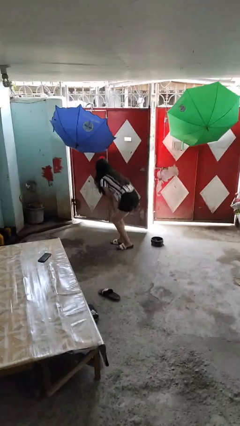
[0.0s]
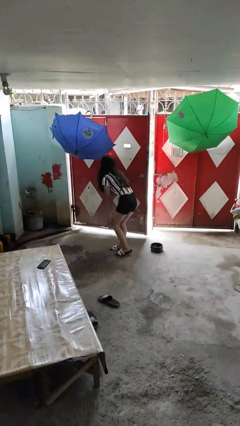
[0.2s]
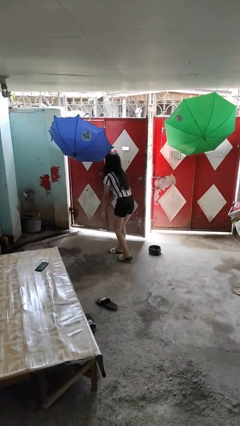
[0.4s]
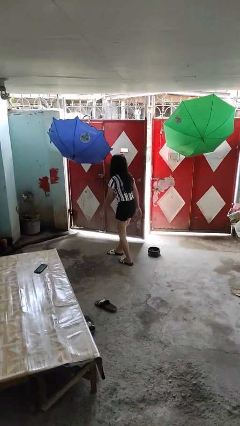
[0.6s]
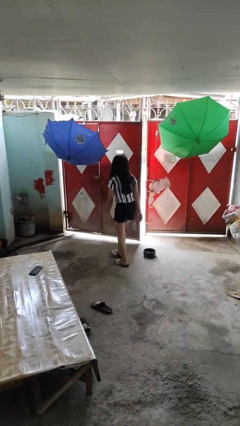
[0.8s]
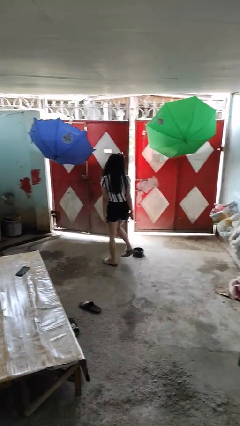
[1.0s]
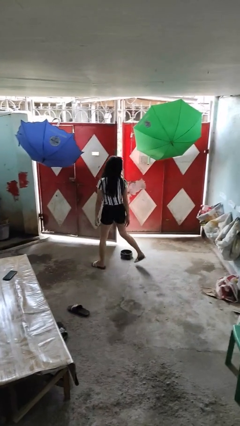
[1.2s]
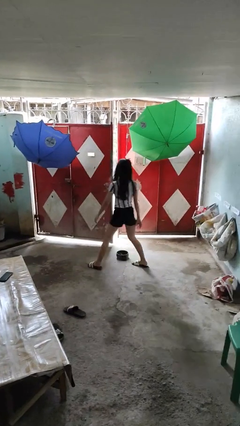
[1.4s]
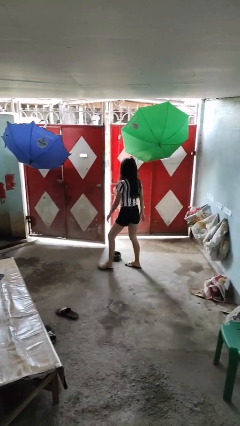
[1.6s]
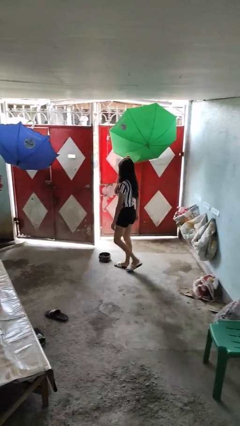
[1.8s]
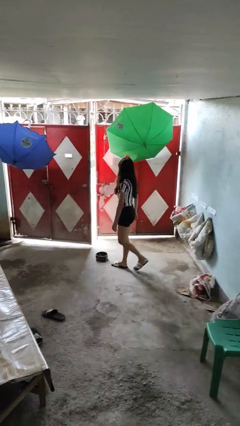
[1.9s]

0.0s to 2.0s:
person stands up from floor

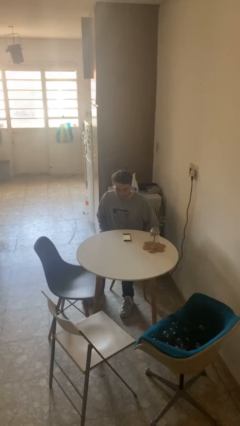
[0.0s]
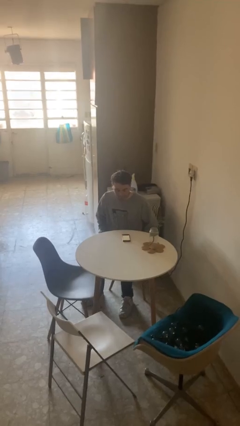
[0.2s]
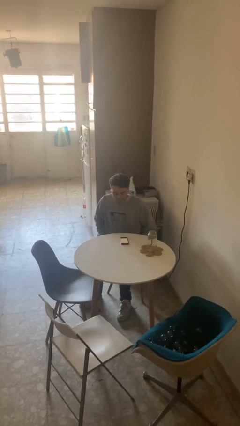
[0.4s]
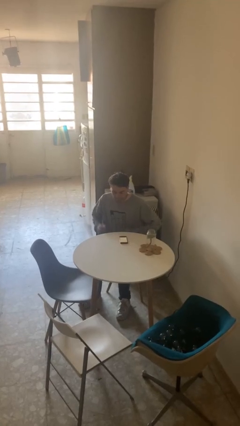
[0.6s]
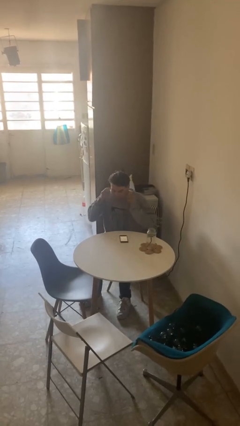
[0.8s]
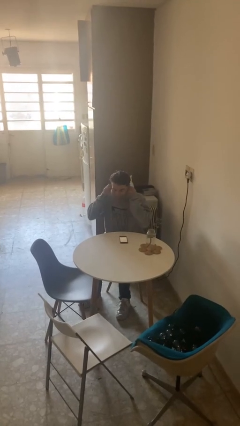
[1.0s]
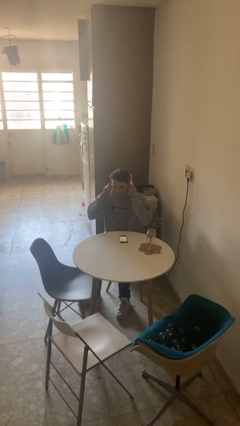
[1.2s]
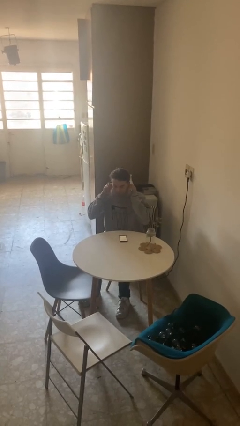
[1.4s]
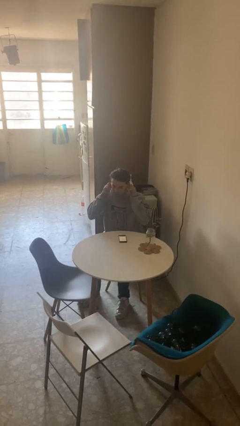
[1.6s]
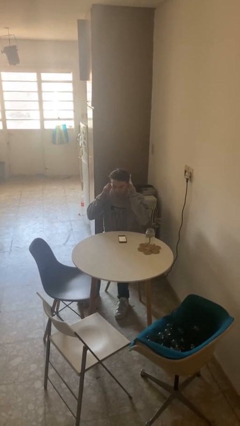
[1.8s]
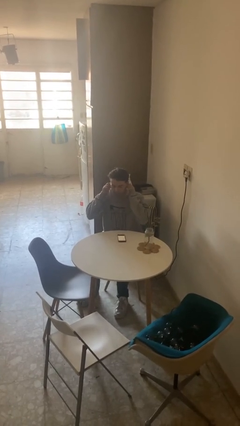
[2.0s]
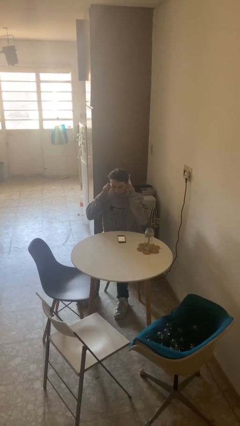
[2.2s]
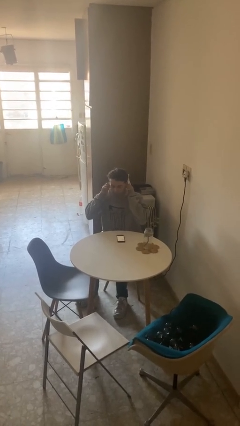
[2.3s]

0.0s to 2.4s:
person puts fingers in ear

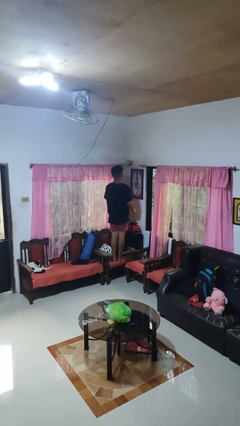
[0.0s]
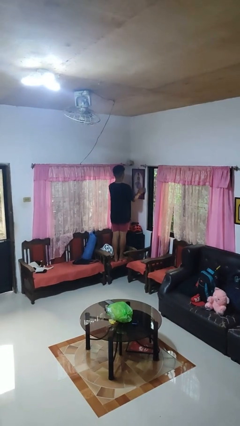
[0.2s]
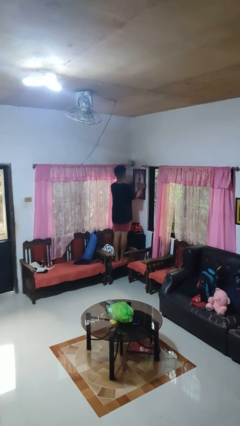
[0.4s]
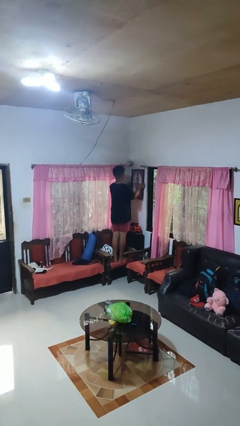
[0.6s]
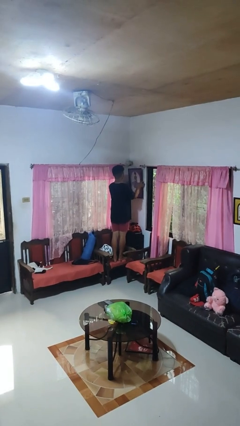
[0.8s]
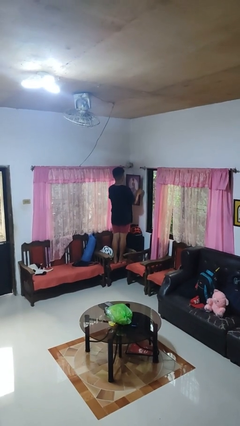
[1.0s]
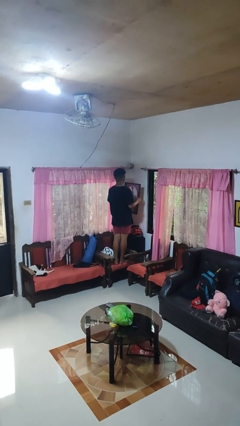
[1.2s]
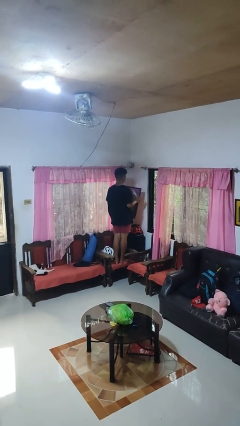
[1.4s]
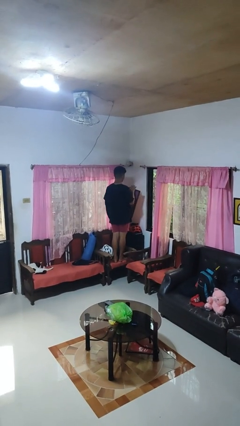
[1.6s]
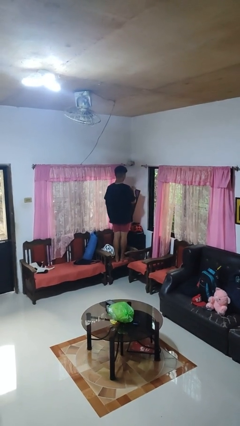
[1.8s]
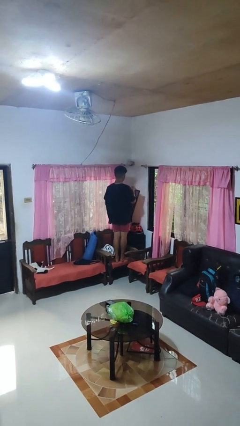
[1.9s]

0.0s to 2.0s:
person takes down picture frame

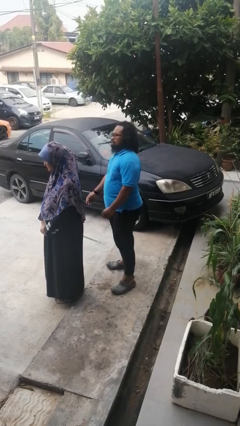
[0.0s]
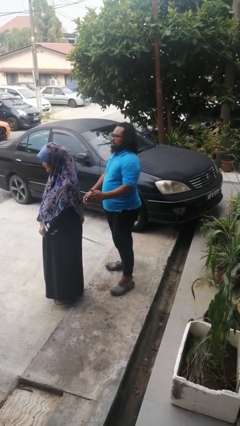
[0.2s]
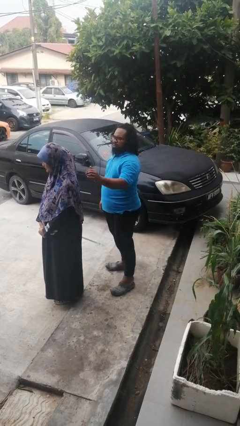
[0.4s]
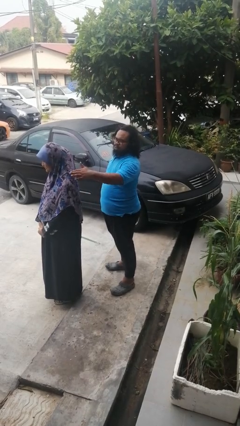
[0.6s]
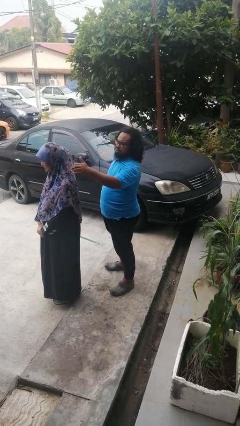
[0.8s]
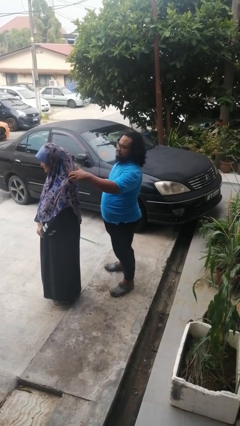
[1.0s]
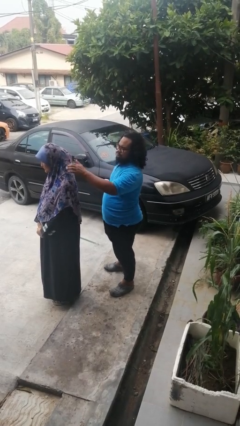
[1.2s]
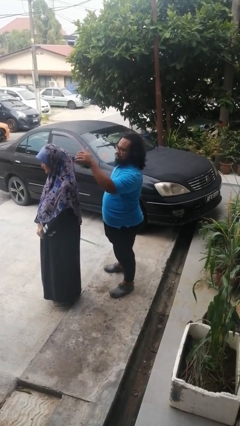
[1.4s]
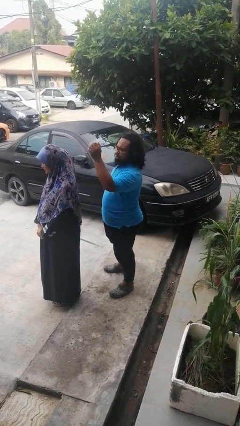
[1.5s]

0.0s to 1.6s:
person touches back of person

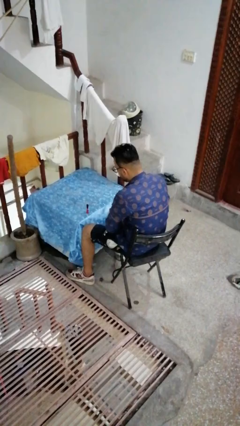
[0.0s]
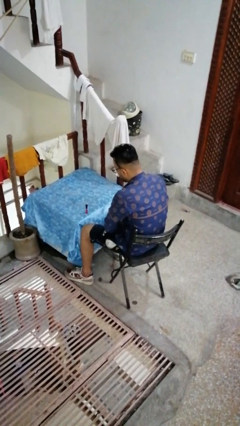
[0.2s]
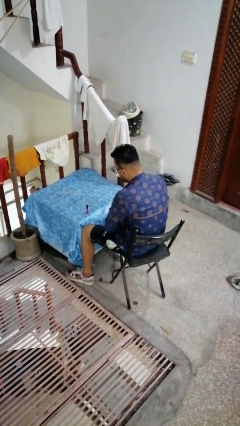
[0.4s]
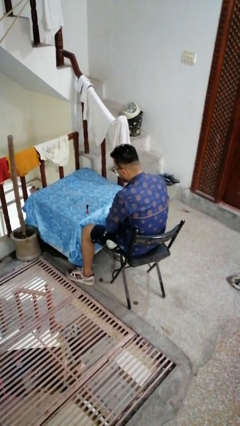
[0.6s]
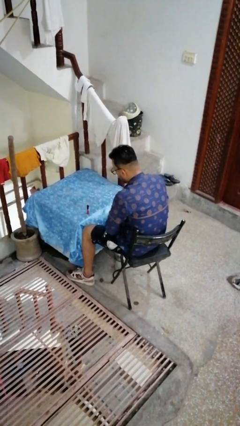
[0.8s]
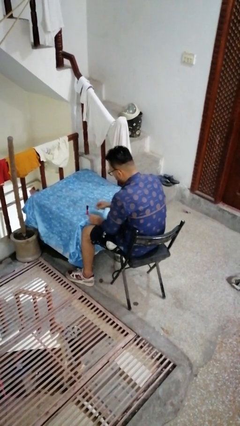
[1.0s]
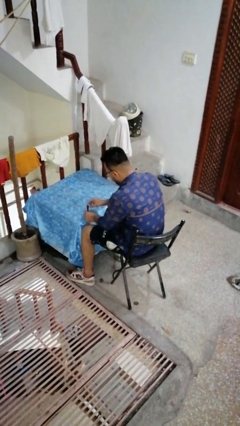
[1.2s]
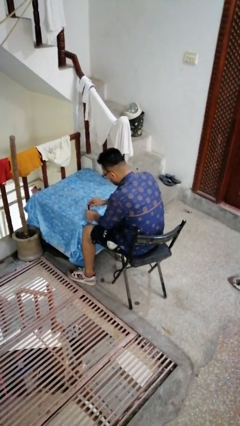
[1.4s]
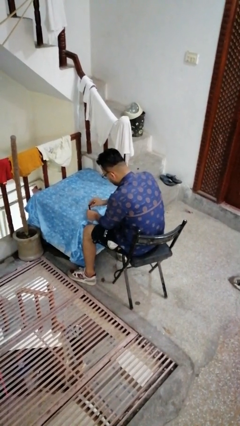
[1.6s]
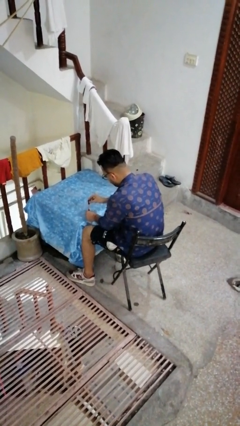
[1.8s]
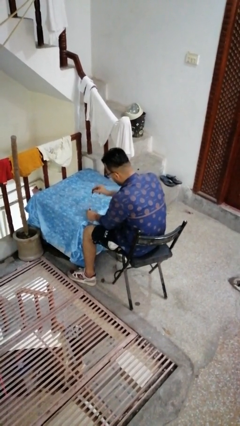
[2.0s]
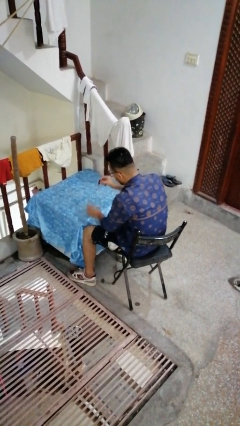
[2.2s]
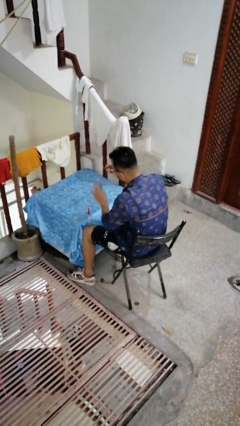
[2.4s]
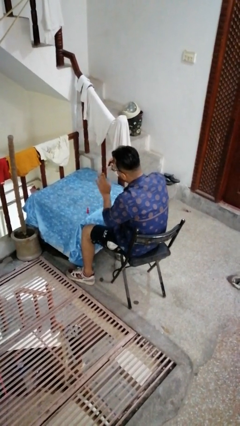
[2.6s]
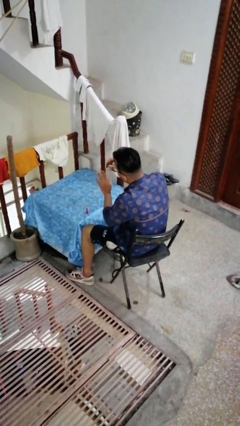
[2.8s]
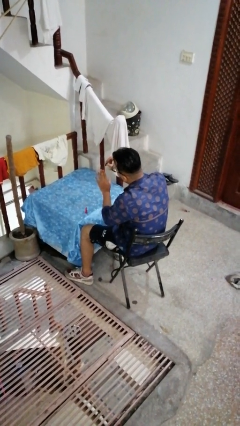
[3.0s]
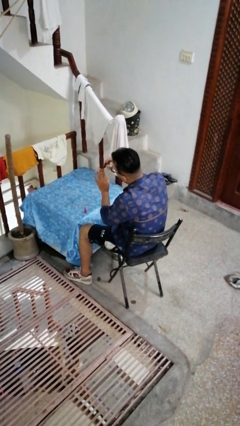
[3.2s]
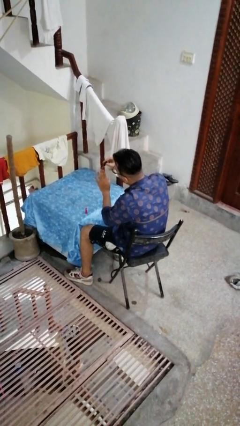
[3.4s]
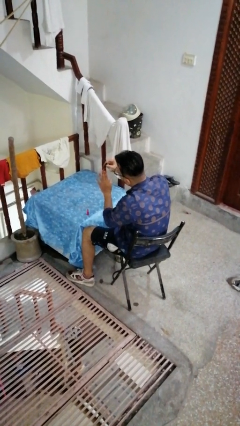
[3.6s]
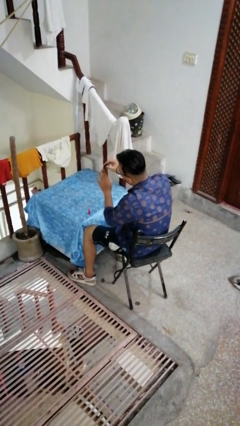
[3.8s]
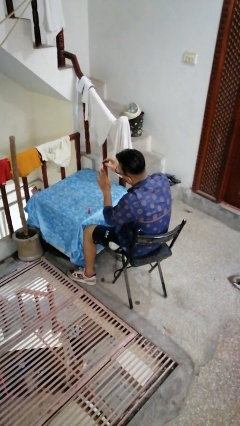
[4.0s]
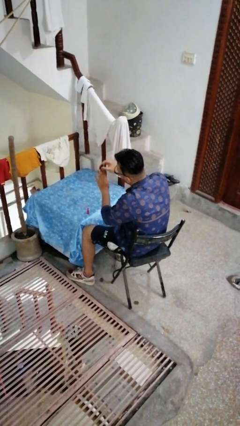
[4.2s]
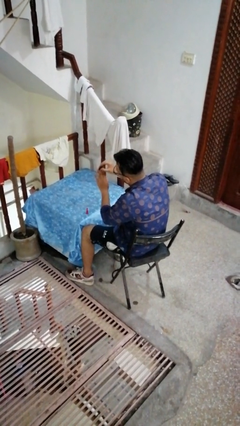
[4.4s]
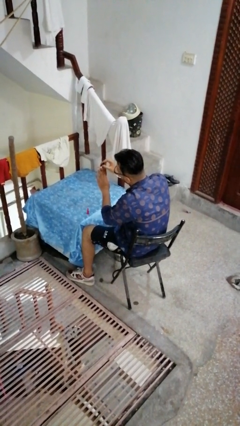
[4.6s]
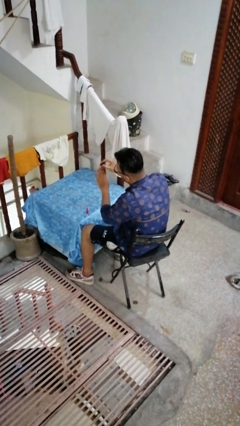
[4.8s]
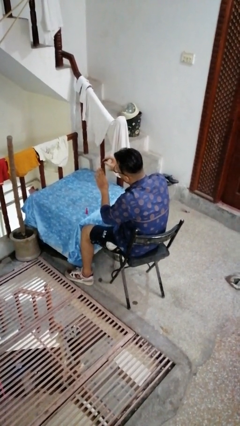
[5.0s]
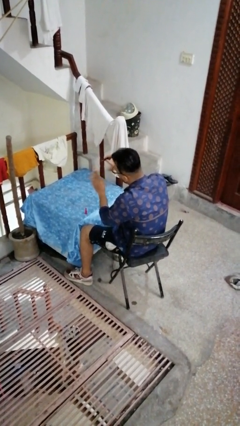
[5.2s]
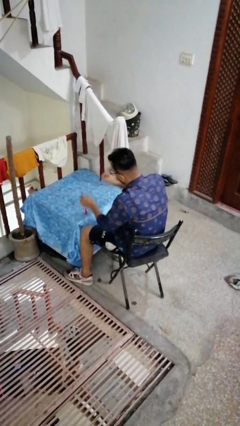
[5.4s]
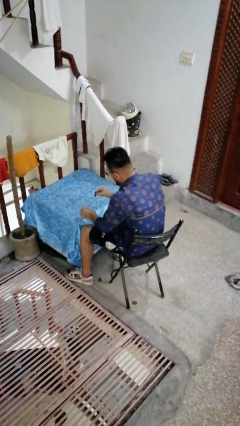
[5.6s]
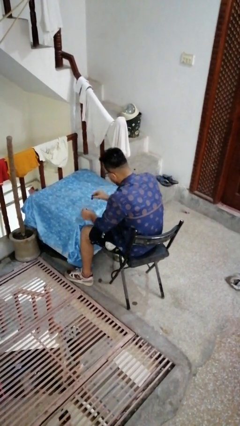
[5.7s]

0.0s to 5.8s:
person paints fingernails

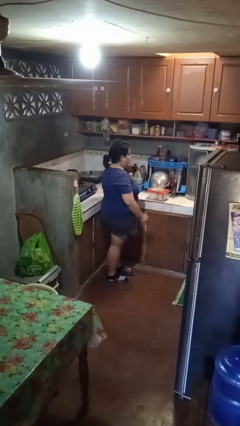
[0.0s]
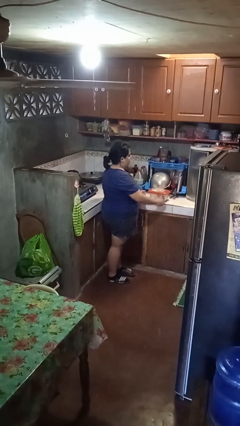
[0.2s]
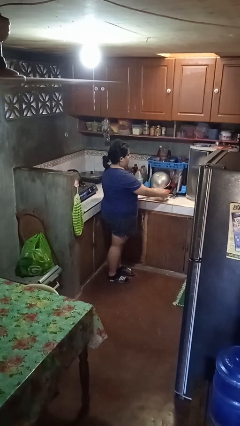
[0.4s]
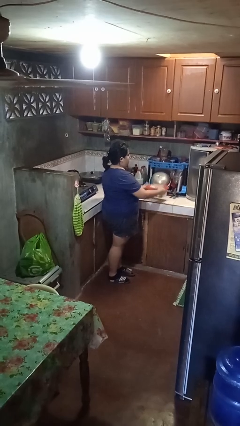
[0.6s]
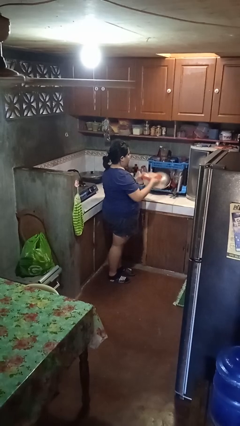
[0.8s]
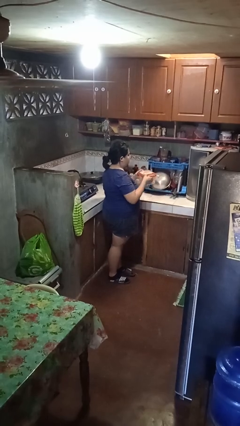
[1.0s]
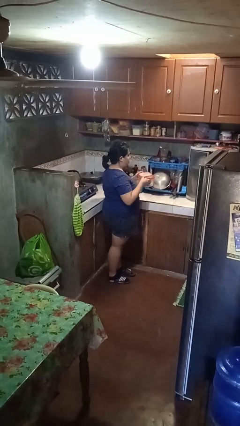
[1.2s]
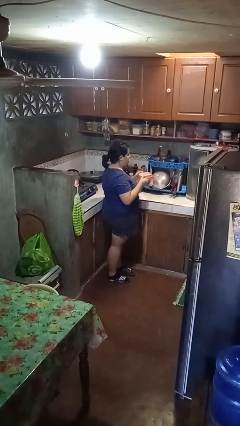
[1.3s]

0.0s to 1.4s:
person picks up object from countertop

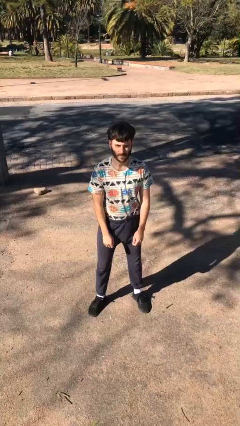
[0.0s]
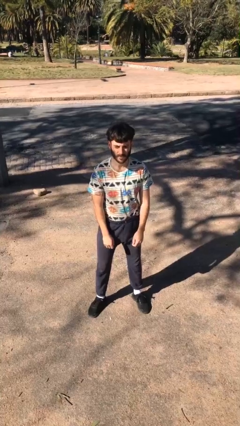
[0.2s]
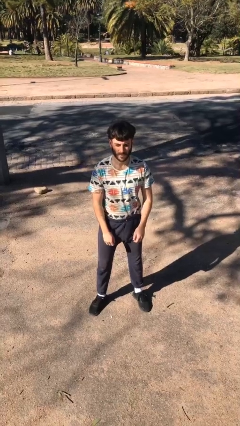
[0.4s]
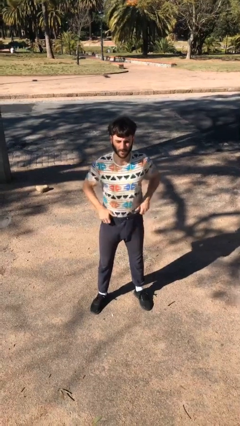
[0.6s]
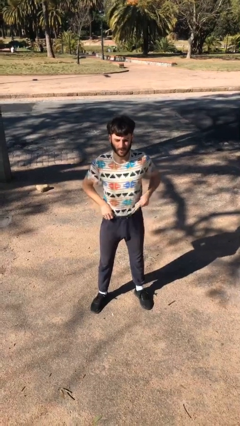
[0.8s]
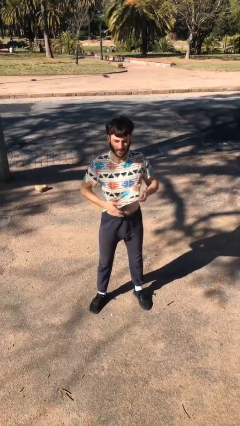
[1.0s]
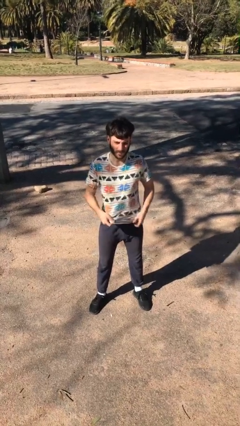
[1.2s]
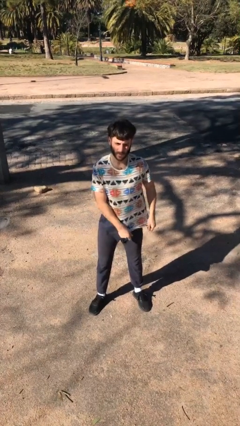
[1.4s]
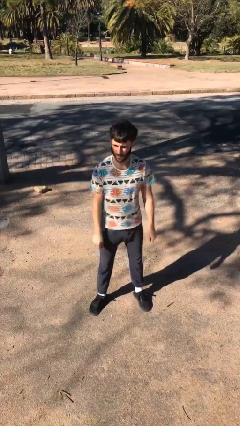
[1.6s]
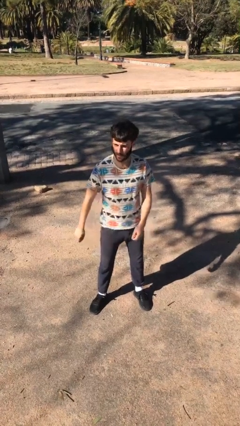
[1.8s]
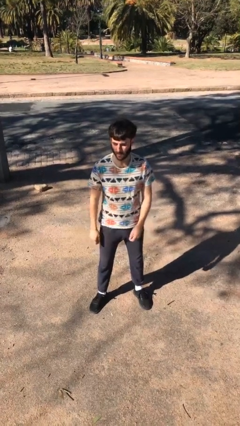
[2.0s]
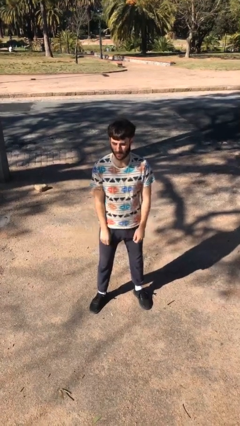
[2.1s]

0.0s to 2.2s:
person untucks shirt
